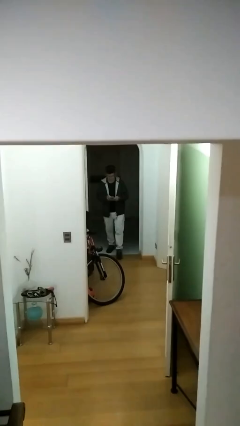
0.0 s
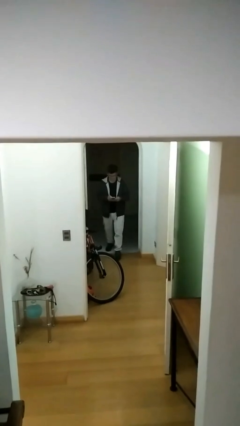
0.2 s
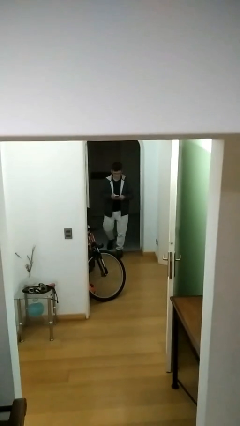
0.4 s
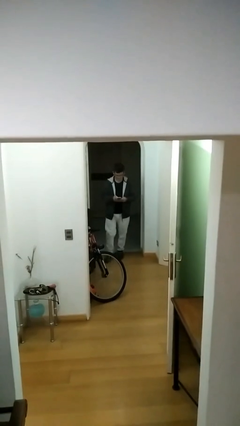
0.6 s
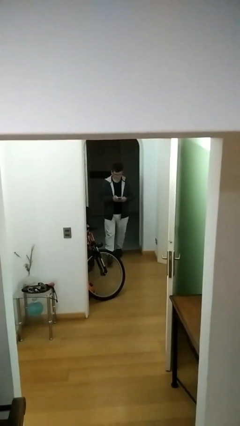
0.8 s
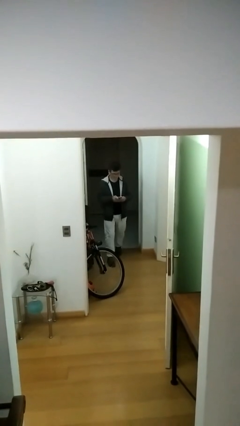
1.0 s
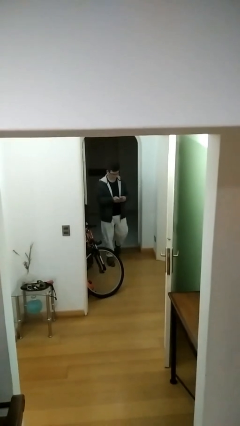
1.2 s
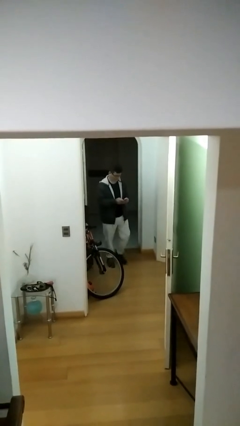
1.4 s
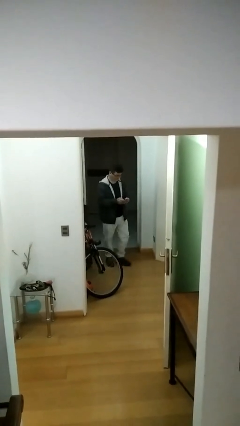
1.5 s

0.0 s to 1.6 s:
person enters scene through structure

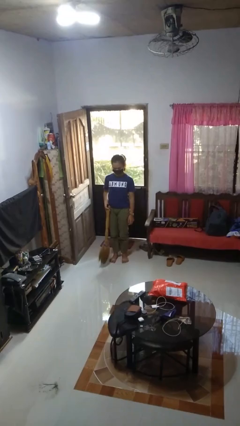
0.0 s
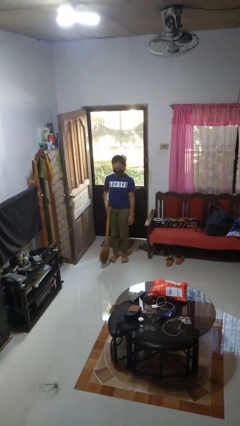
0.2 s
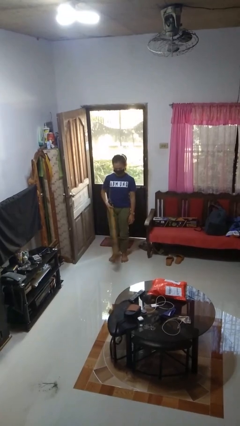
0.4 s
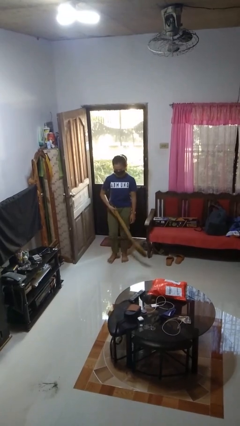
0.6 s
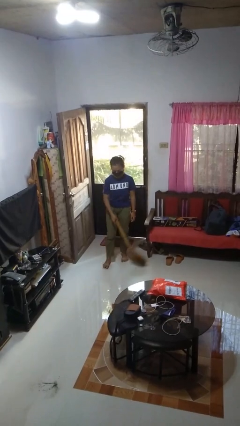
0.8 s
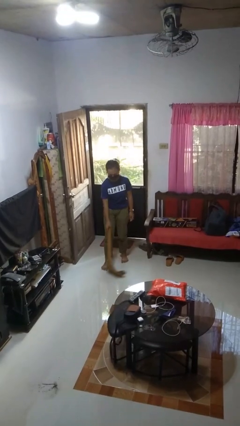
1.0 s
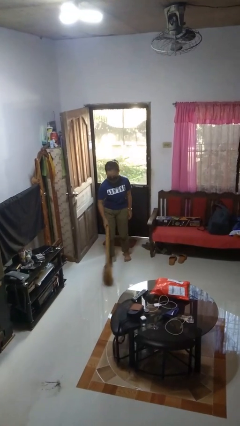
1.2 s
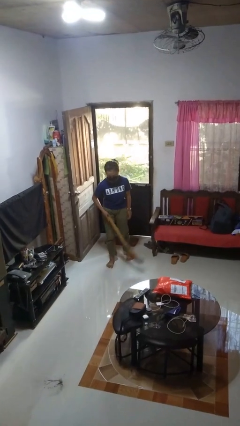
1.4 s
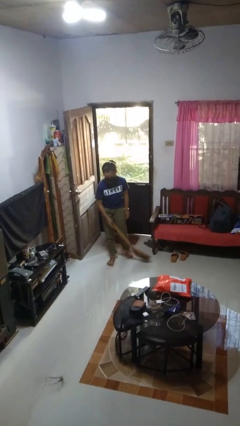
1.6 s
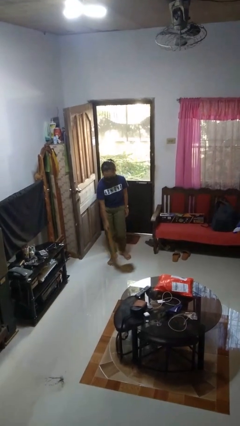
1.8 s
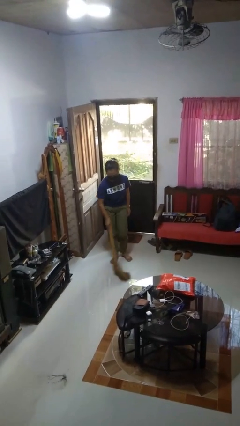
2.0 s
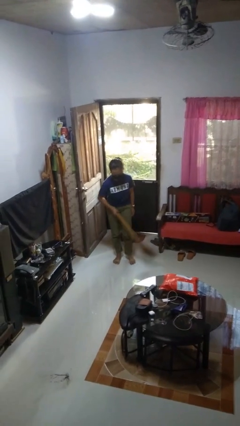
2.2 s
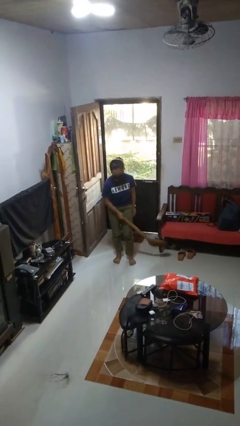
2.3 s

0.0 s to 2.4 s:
person sweeps floor

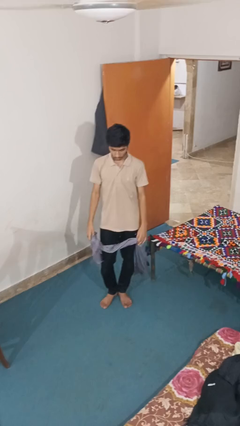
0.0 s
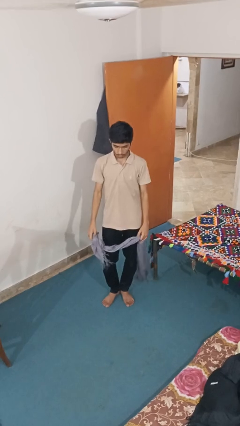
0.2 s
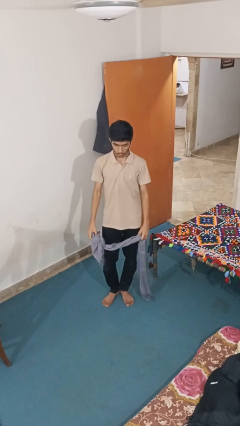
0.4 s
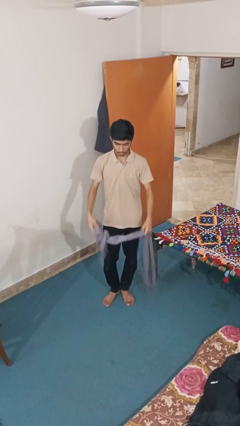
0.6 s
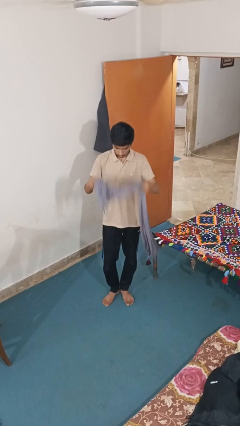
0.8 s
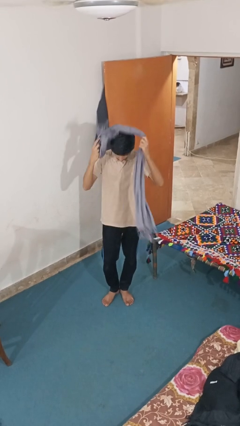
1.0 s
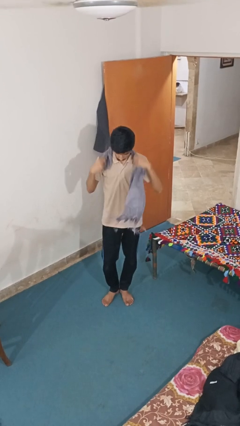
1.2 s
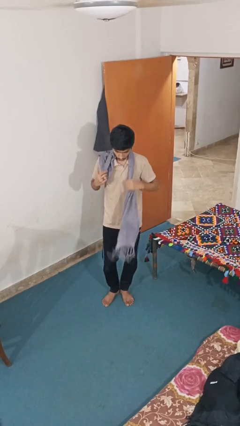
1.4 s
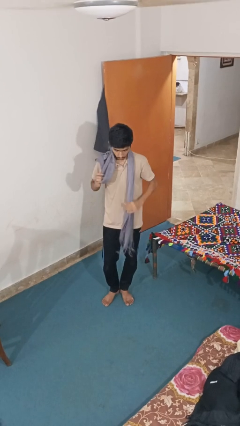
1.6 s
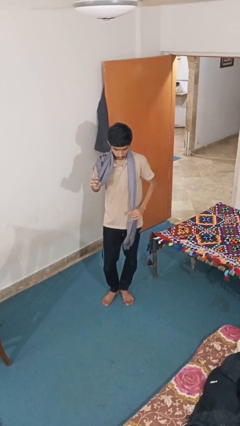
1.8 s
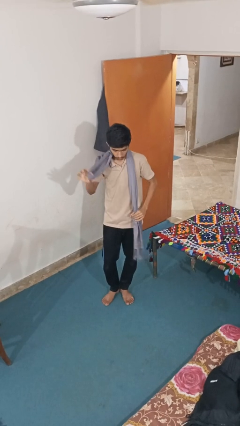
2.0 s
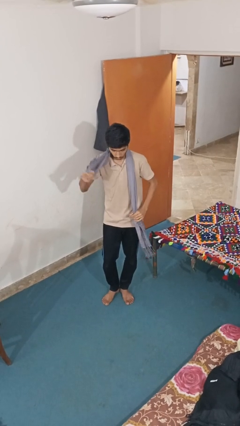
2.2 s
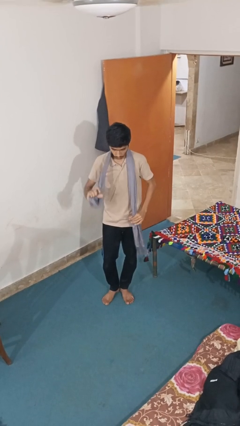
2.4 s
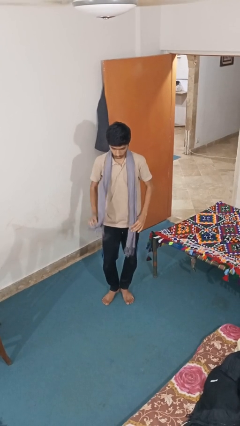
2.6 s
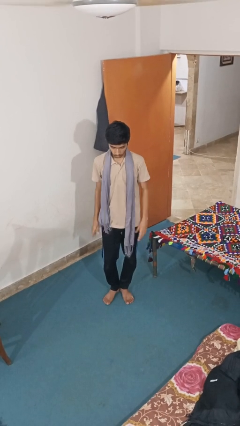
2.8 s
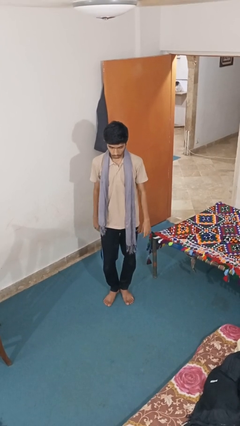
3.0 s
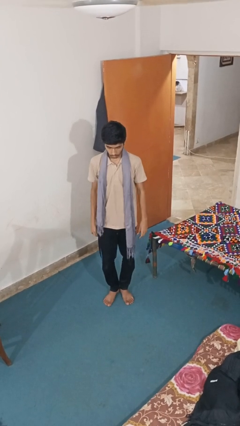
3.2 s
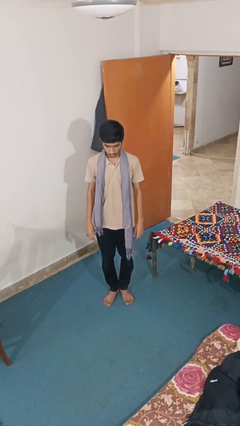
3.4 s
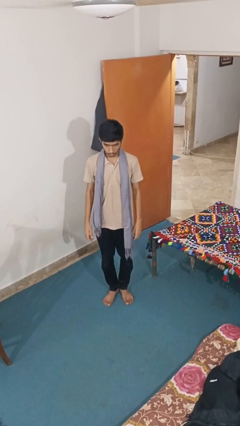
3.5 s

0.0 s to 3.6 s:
person puts on scarf

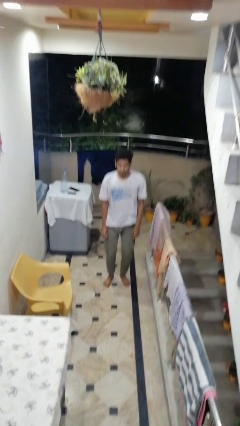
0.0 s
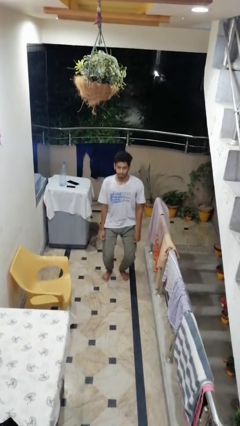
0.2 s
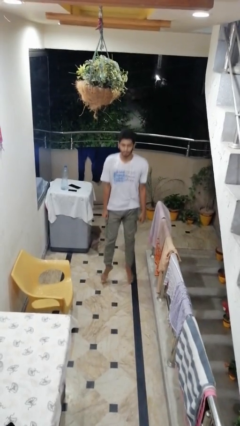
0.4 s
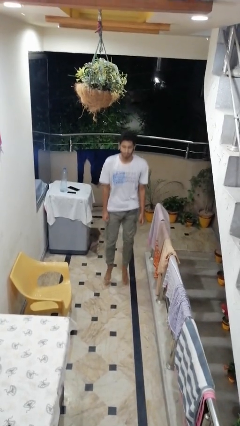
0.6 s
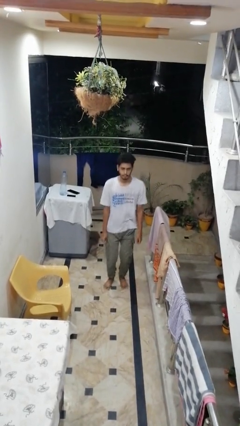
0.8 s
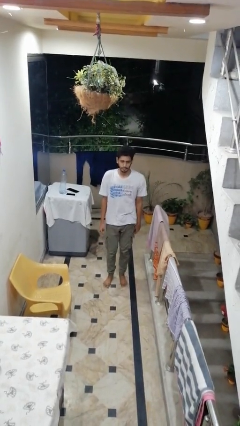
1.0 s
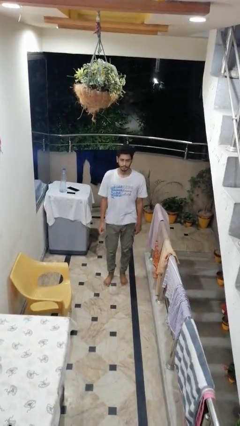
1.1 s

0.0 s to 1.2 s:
person jumps

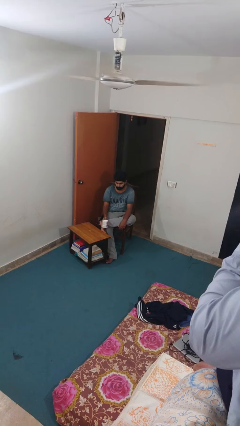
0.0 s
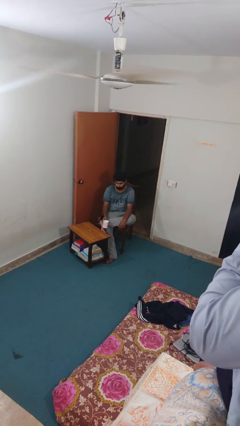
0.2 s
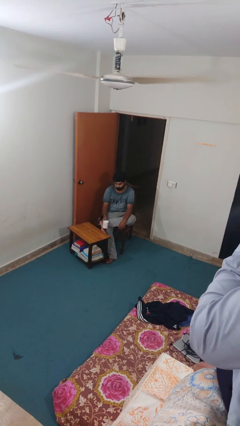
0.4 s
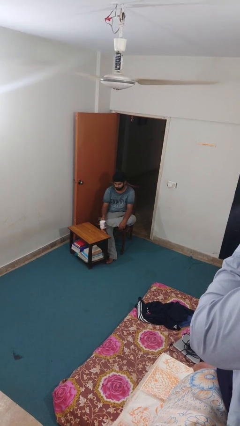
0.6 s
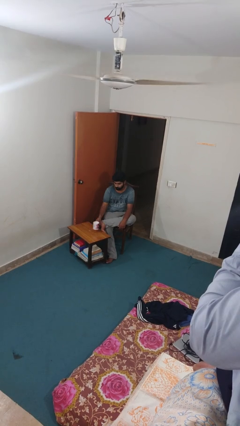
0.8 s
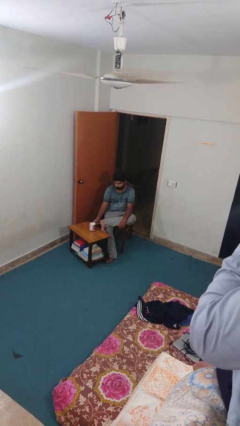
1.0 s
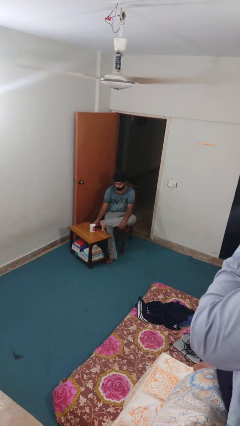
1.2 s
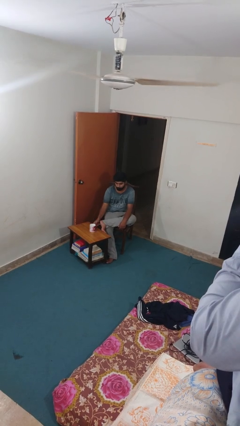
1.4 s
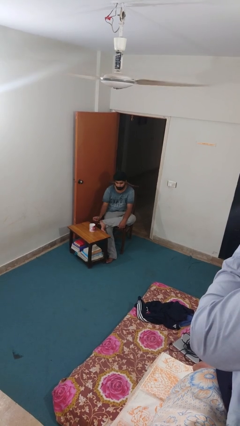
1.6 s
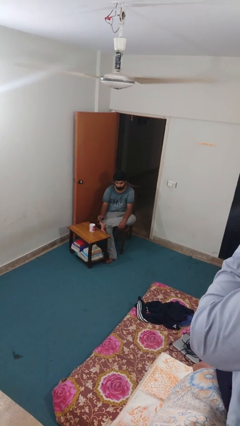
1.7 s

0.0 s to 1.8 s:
person puts down object on table

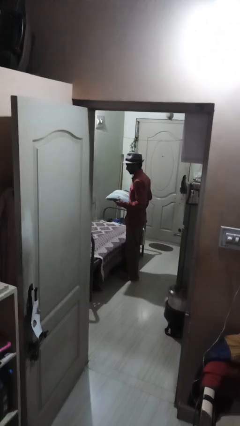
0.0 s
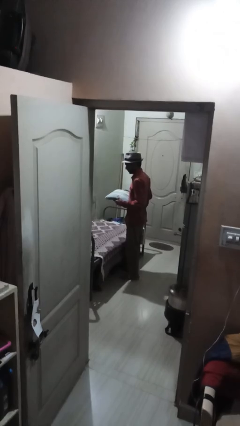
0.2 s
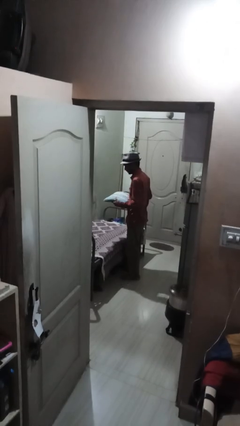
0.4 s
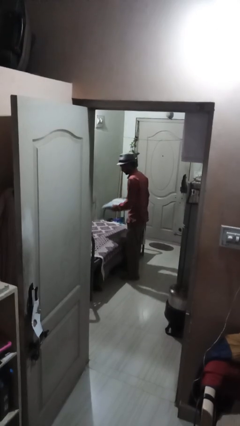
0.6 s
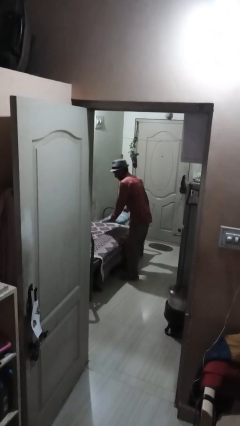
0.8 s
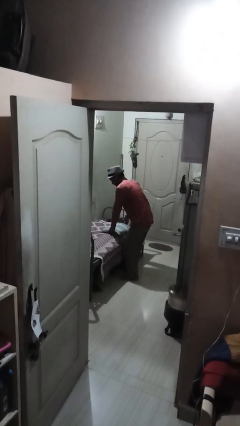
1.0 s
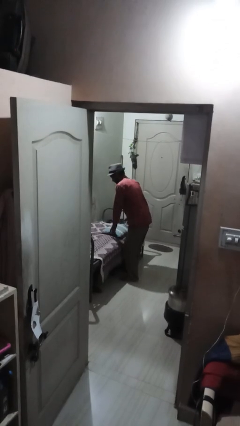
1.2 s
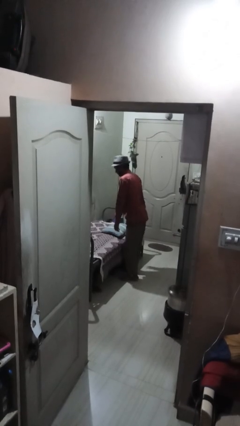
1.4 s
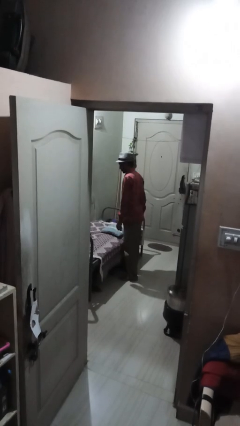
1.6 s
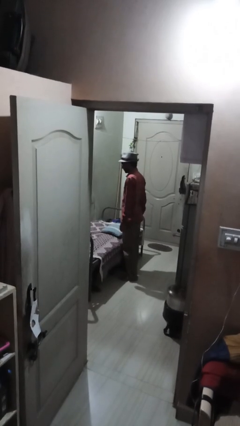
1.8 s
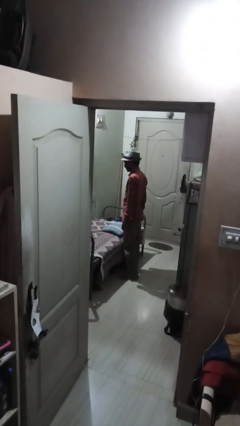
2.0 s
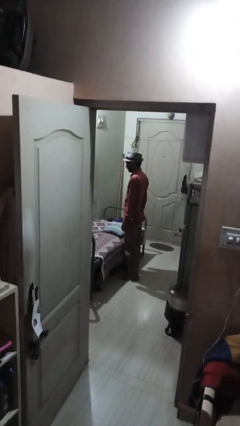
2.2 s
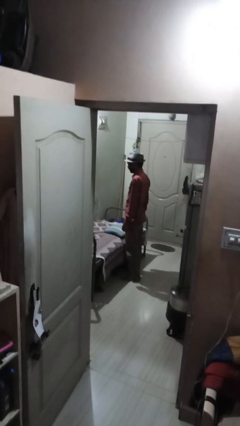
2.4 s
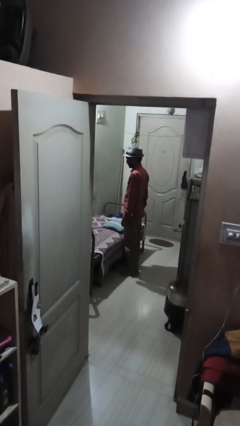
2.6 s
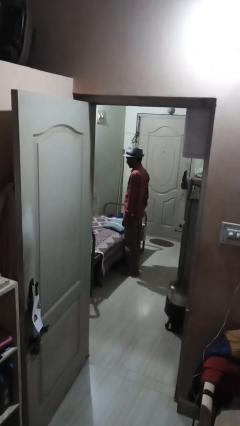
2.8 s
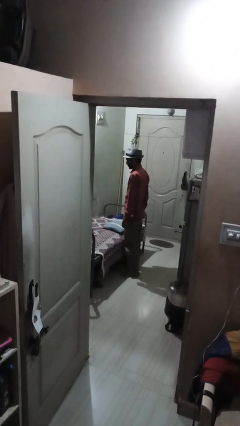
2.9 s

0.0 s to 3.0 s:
person puts down object on bed

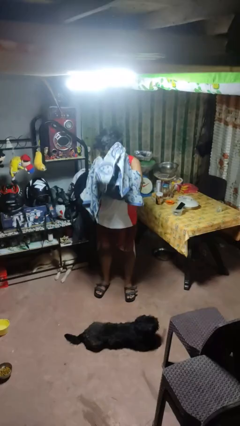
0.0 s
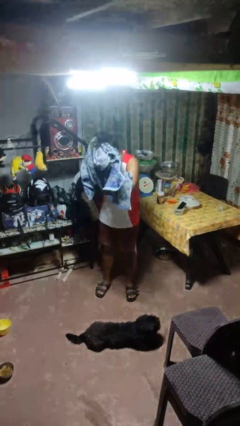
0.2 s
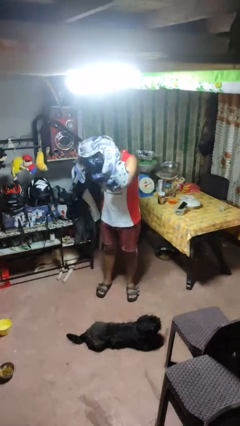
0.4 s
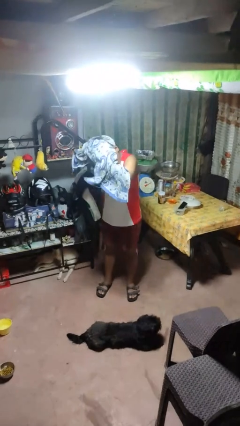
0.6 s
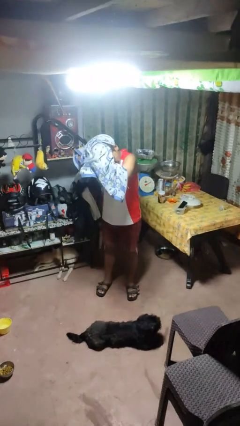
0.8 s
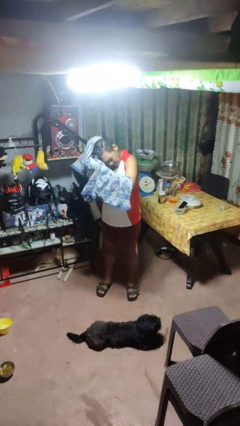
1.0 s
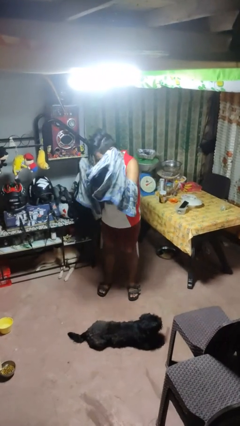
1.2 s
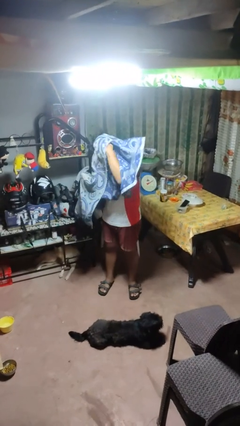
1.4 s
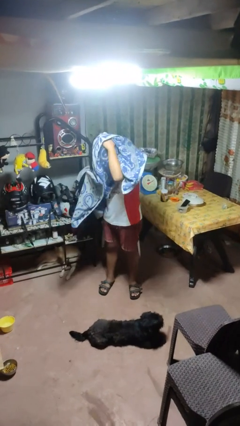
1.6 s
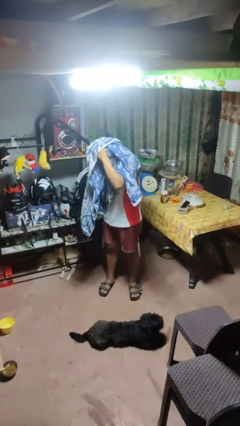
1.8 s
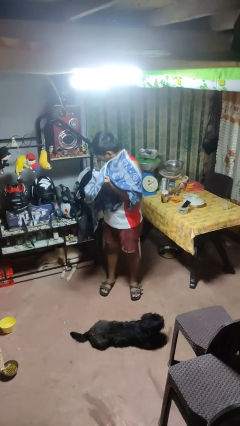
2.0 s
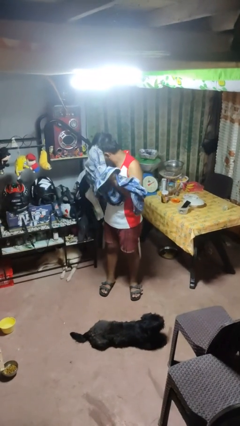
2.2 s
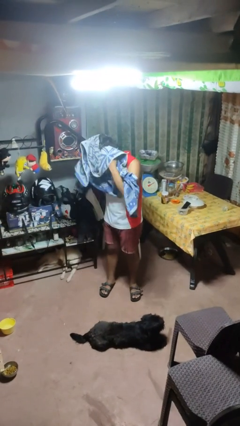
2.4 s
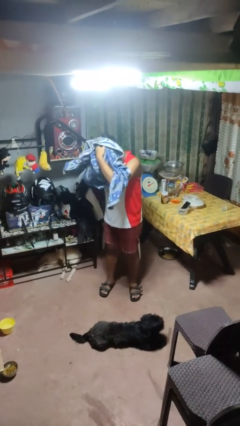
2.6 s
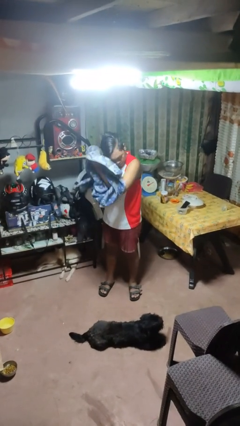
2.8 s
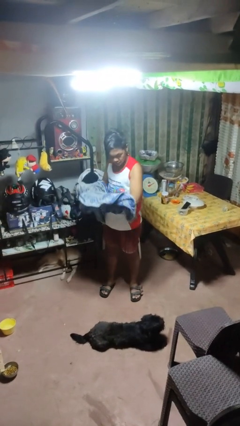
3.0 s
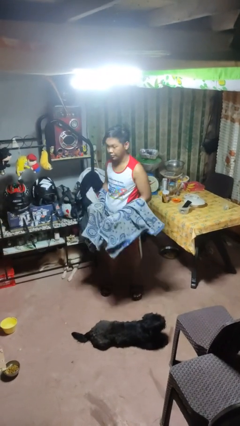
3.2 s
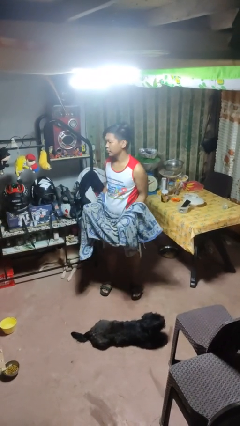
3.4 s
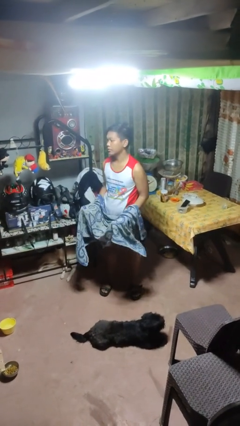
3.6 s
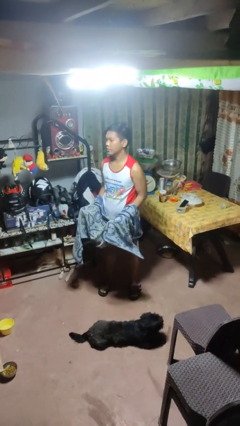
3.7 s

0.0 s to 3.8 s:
person dries hair with towel
